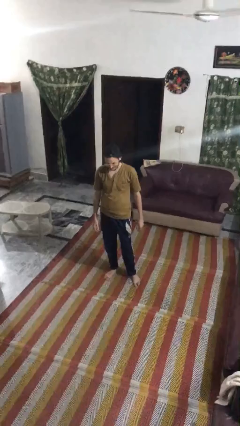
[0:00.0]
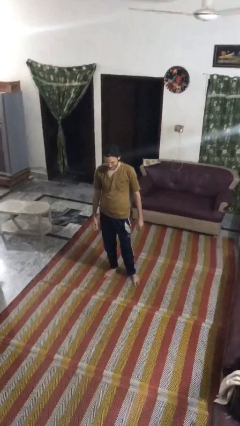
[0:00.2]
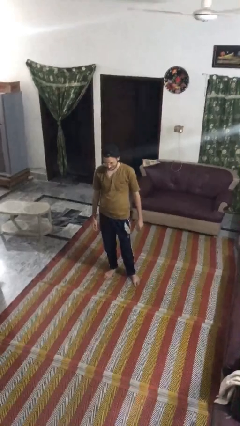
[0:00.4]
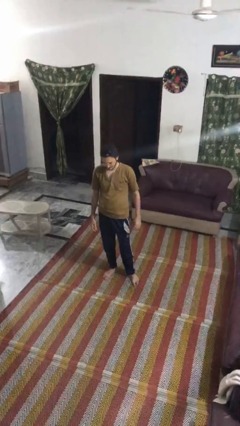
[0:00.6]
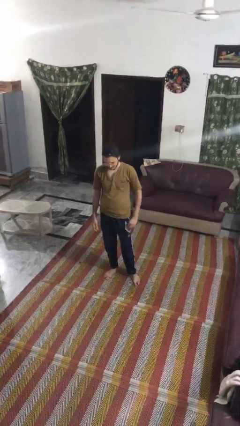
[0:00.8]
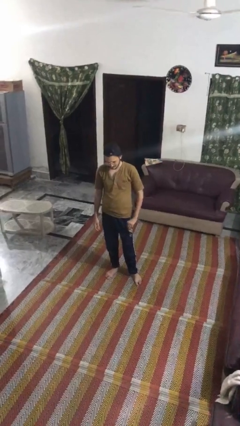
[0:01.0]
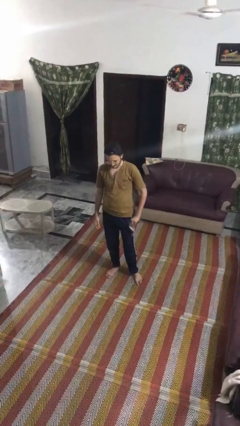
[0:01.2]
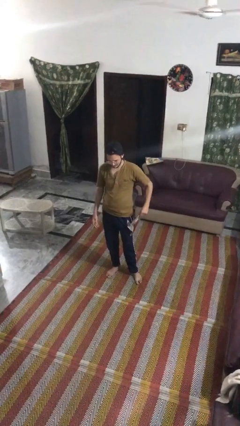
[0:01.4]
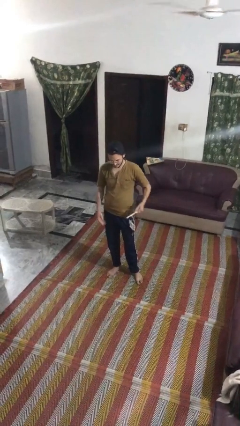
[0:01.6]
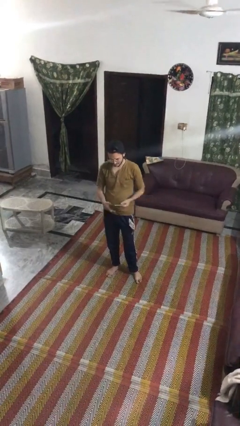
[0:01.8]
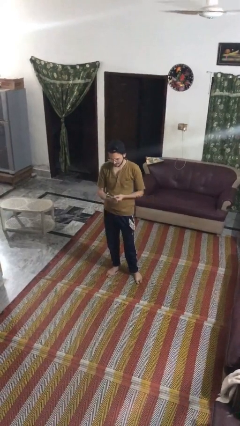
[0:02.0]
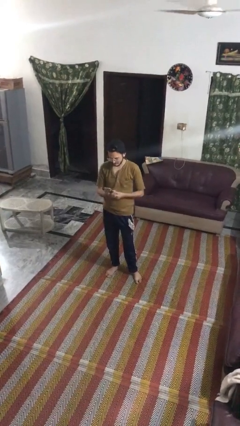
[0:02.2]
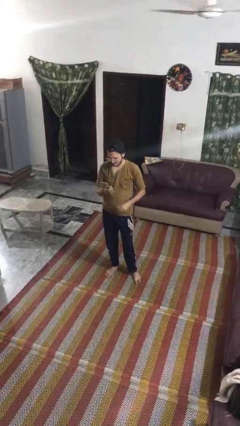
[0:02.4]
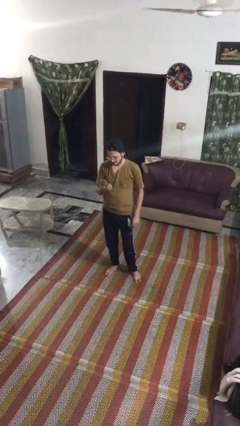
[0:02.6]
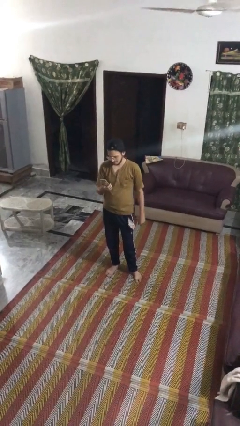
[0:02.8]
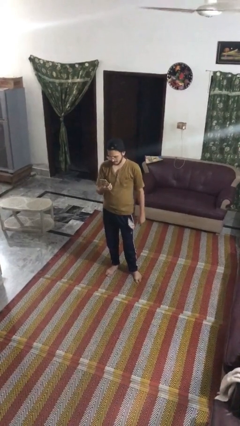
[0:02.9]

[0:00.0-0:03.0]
person takes phone from pocket

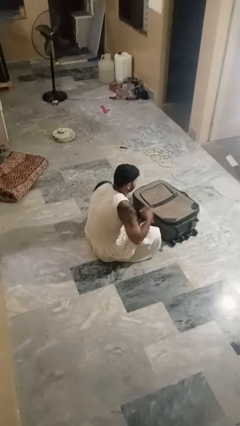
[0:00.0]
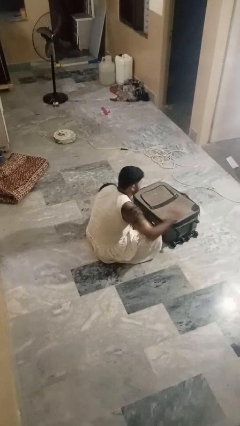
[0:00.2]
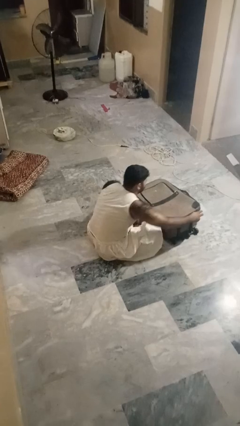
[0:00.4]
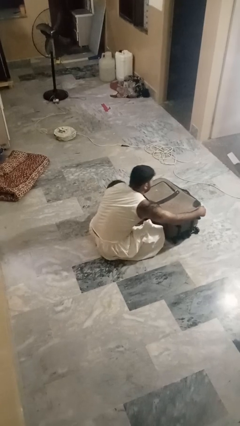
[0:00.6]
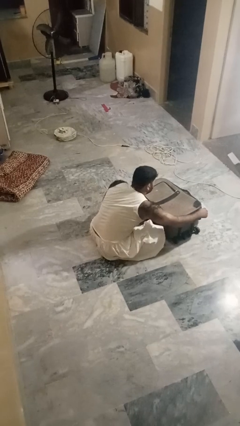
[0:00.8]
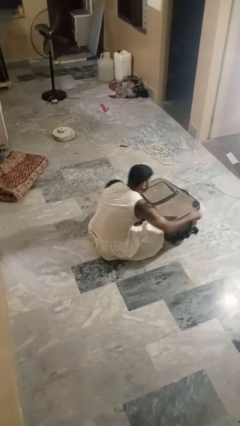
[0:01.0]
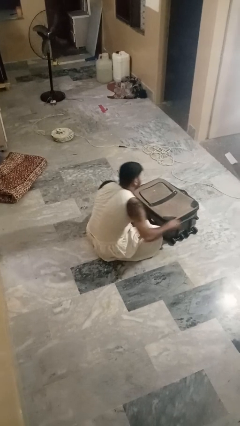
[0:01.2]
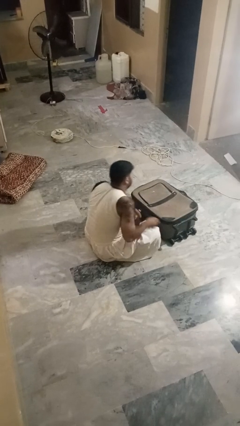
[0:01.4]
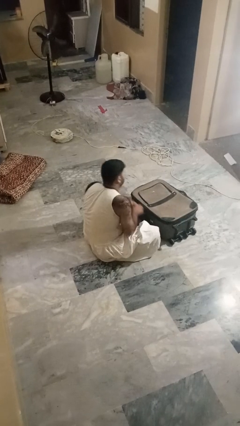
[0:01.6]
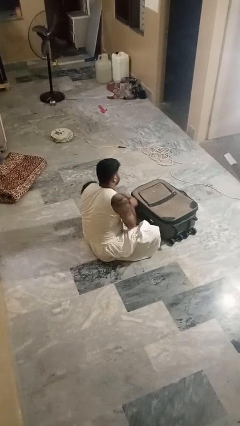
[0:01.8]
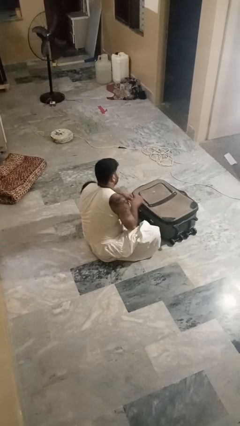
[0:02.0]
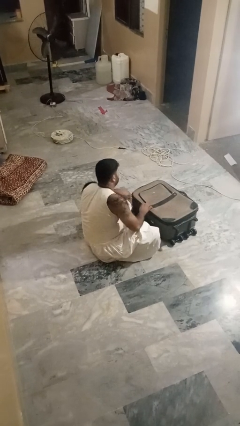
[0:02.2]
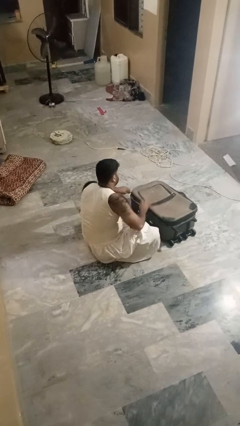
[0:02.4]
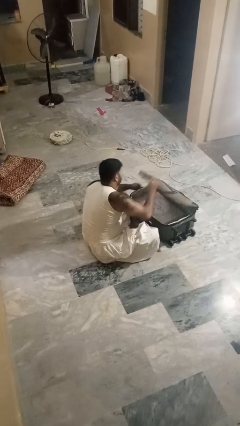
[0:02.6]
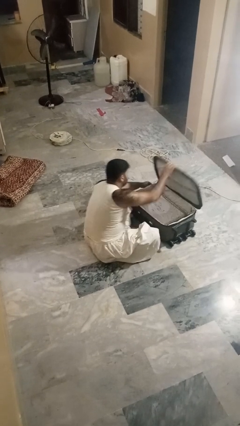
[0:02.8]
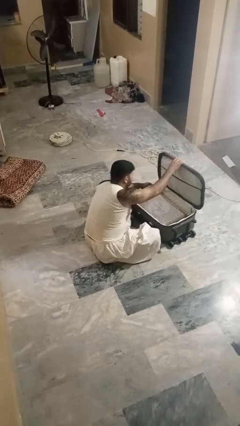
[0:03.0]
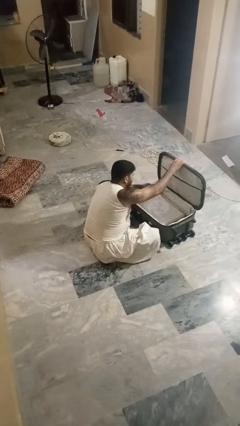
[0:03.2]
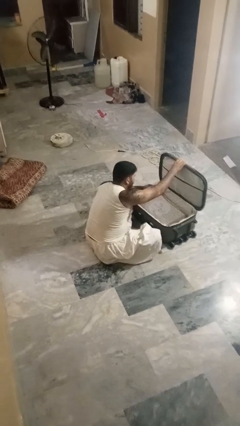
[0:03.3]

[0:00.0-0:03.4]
person opens suitcase

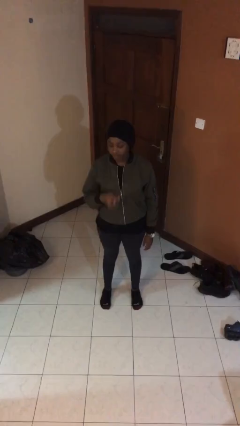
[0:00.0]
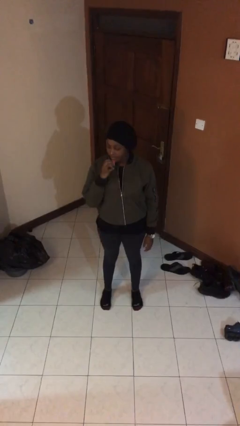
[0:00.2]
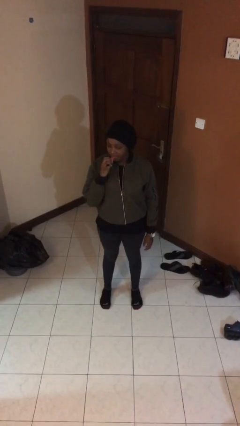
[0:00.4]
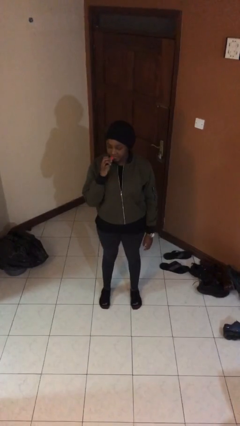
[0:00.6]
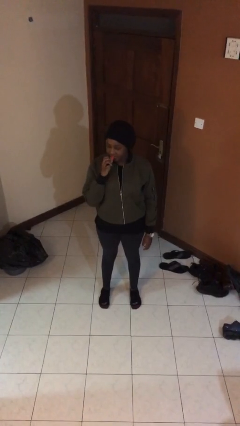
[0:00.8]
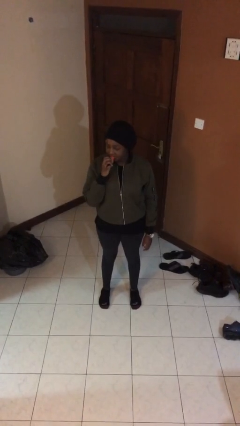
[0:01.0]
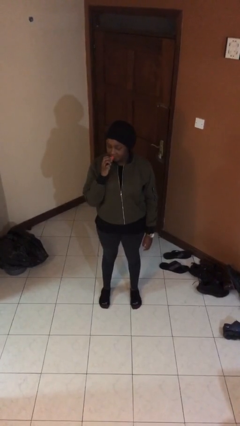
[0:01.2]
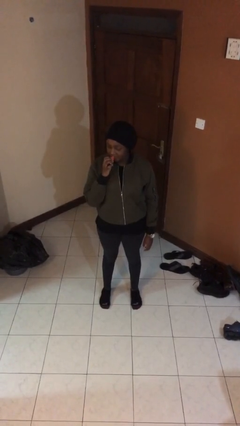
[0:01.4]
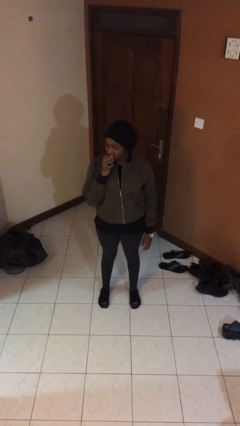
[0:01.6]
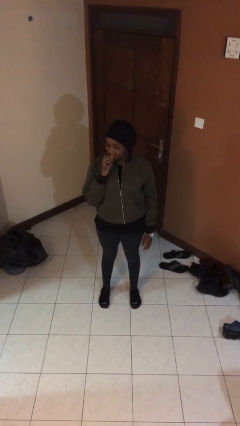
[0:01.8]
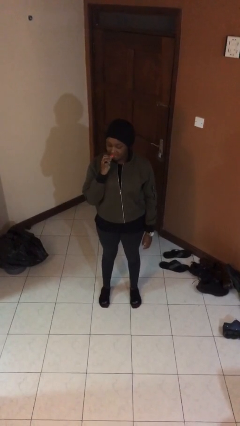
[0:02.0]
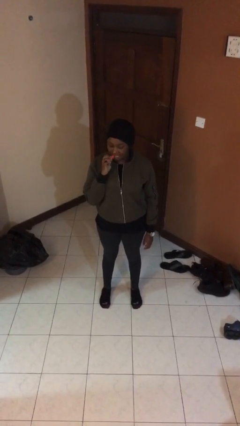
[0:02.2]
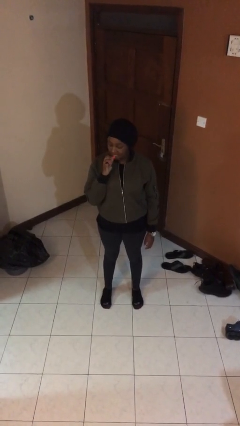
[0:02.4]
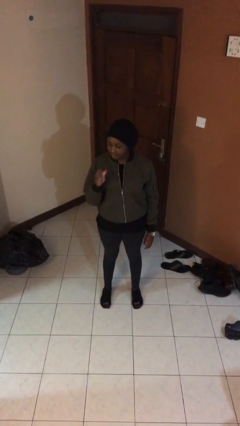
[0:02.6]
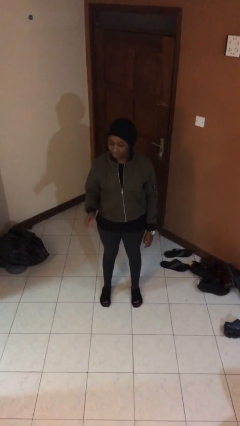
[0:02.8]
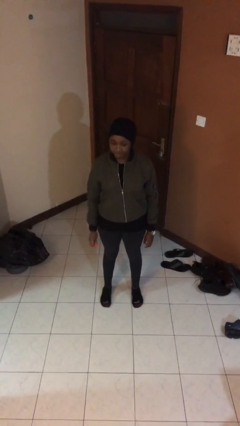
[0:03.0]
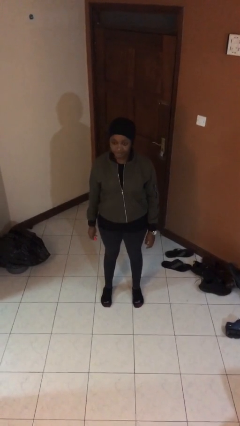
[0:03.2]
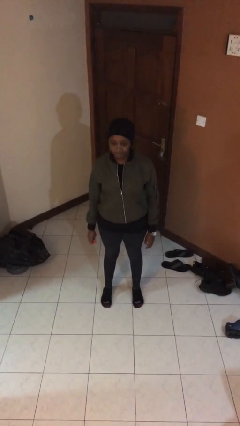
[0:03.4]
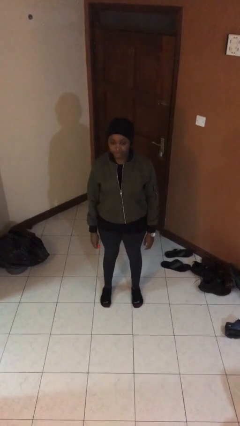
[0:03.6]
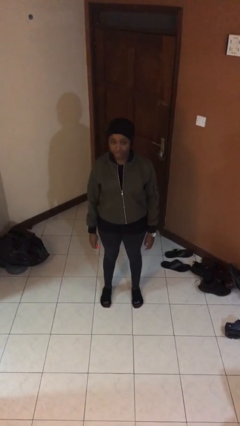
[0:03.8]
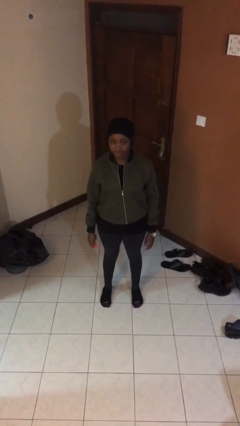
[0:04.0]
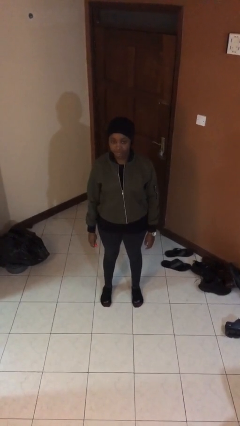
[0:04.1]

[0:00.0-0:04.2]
person applies lip makeup

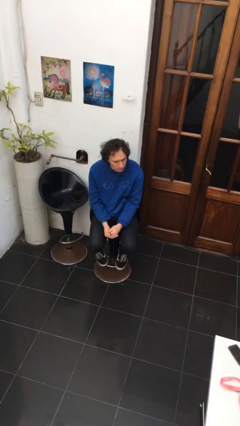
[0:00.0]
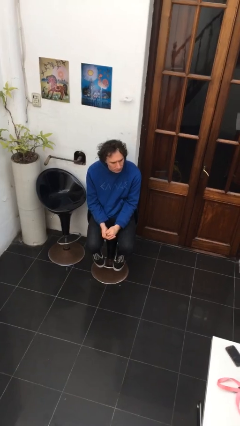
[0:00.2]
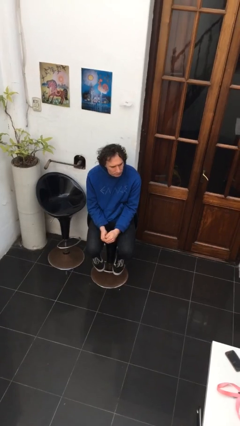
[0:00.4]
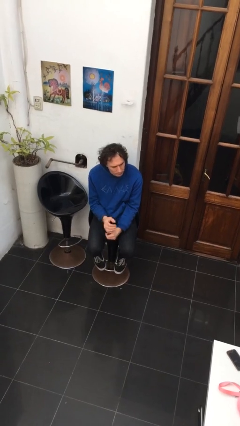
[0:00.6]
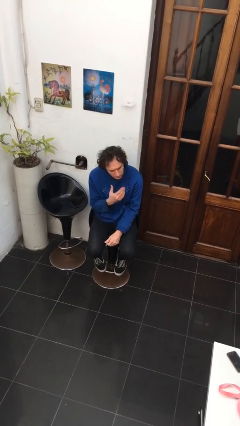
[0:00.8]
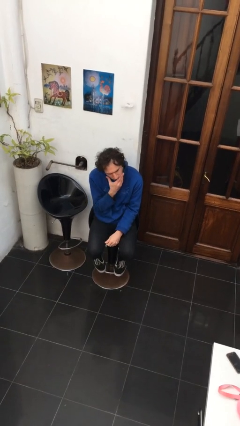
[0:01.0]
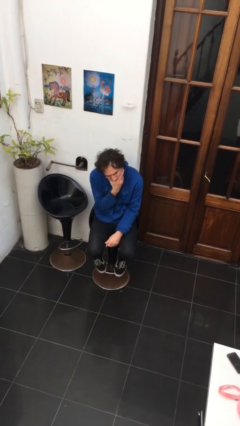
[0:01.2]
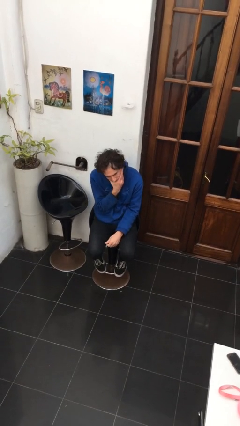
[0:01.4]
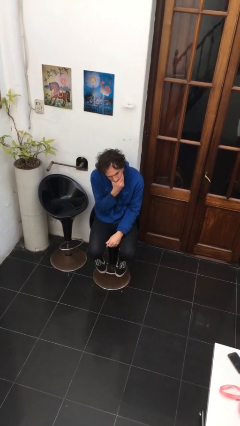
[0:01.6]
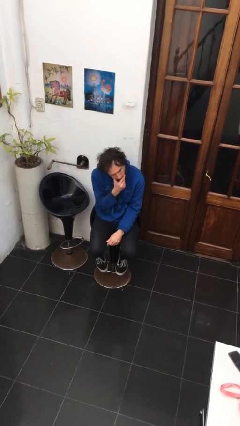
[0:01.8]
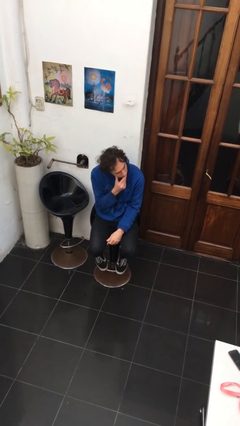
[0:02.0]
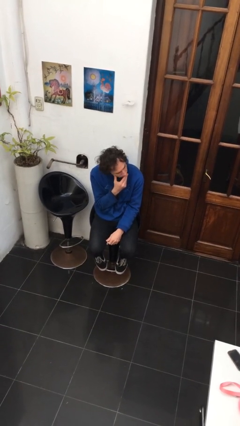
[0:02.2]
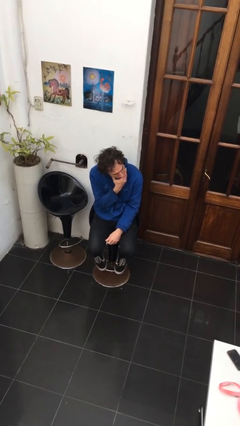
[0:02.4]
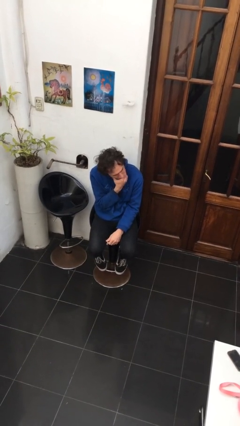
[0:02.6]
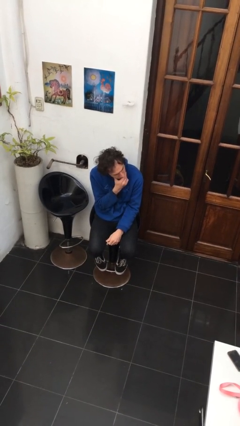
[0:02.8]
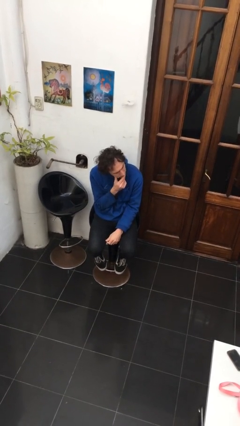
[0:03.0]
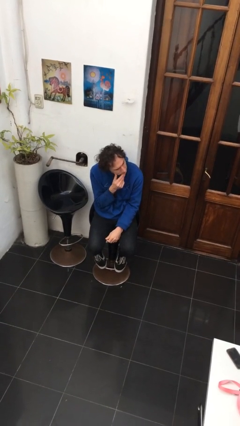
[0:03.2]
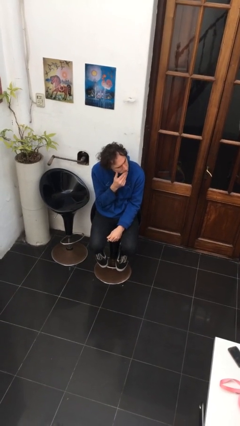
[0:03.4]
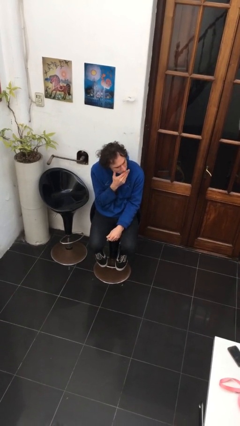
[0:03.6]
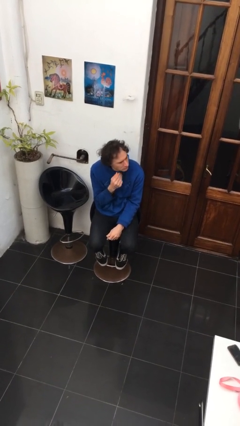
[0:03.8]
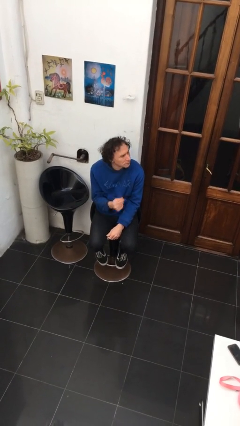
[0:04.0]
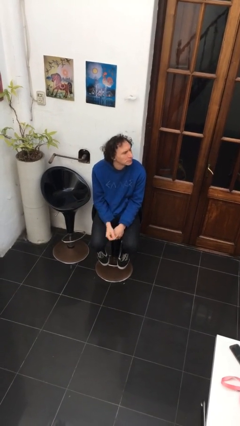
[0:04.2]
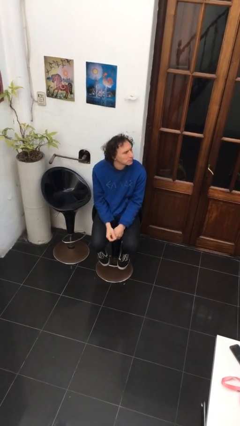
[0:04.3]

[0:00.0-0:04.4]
person strokes chin

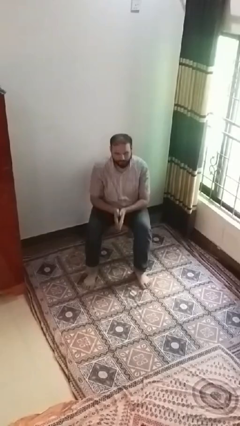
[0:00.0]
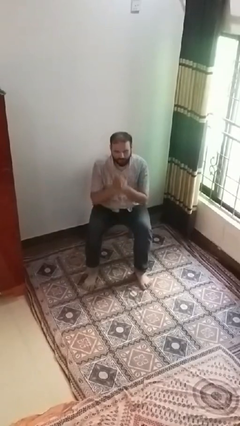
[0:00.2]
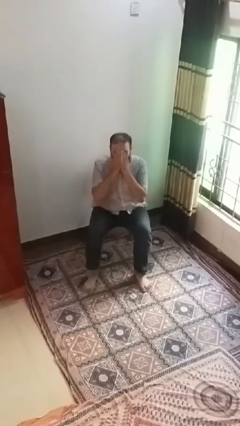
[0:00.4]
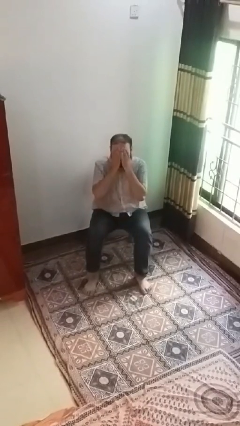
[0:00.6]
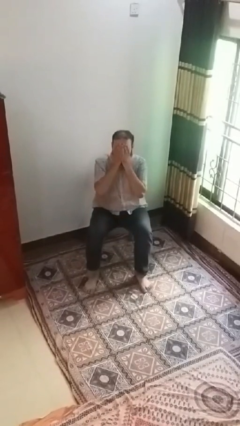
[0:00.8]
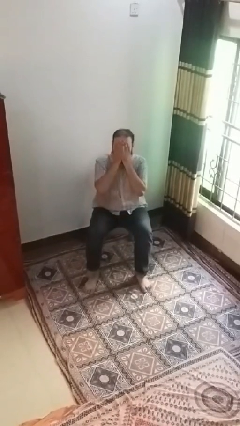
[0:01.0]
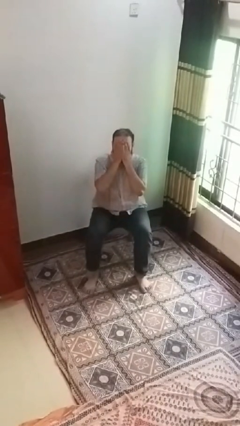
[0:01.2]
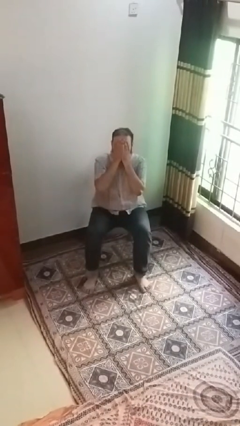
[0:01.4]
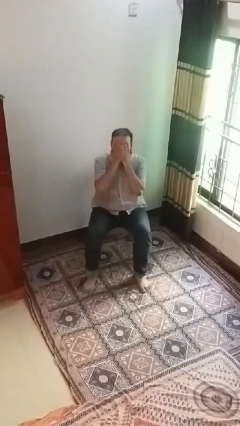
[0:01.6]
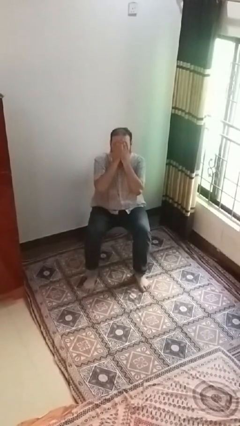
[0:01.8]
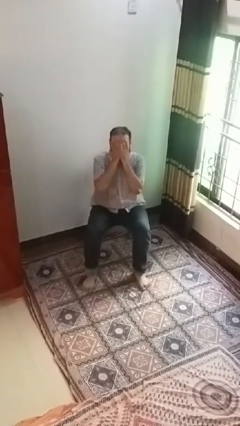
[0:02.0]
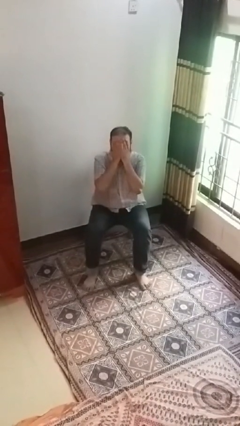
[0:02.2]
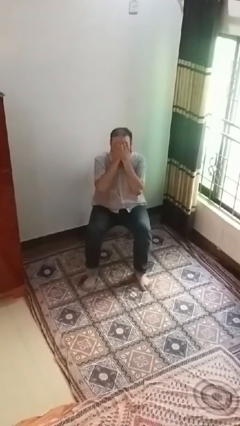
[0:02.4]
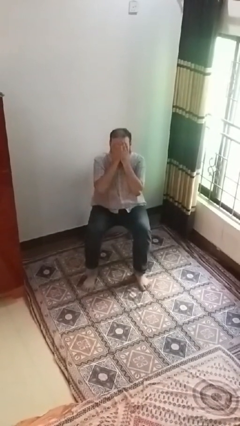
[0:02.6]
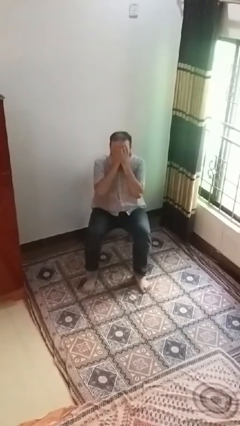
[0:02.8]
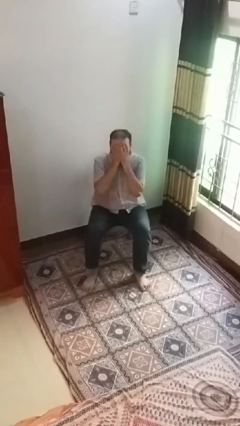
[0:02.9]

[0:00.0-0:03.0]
person covers face with hands
